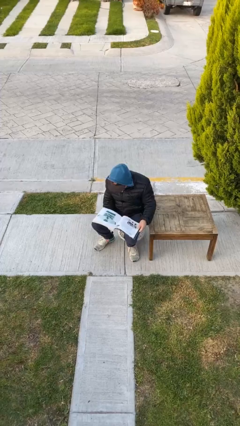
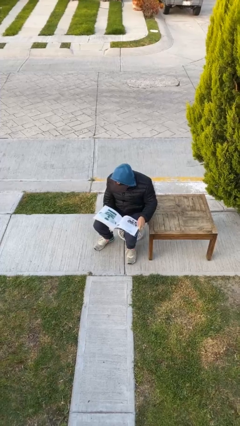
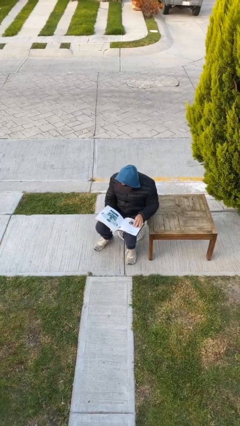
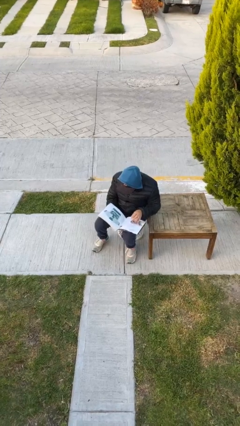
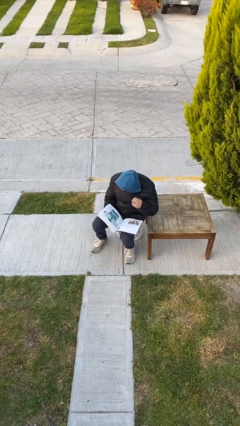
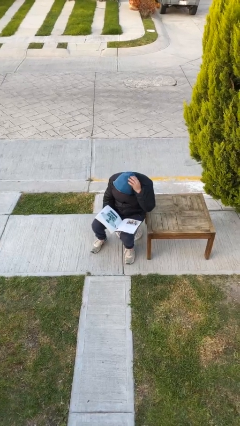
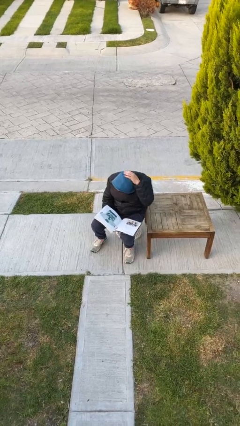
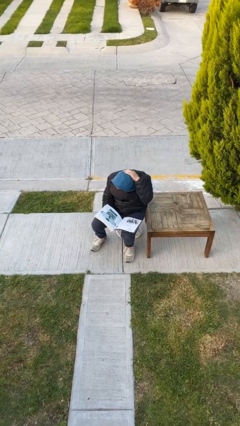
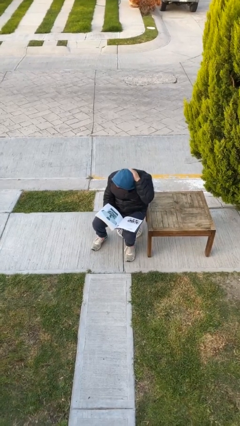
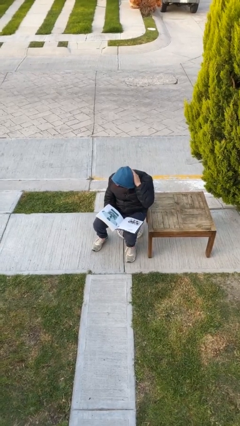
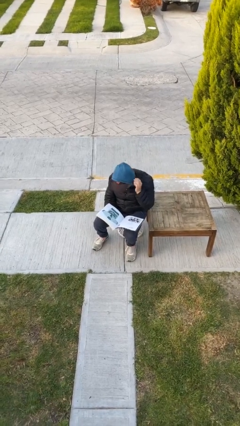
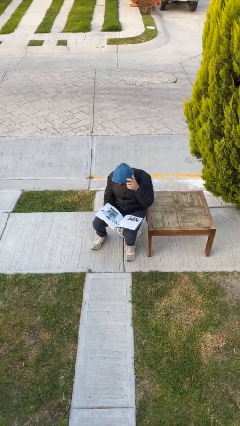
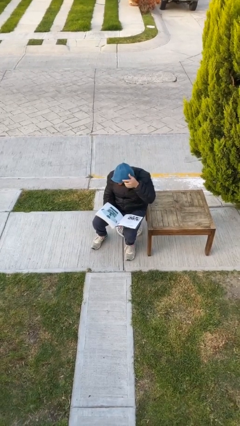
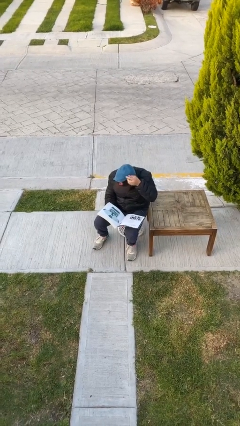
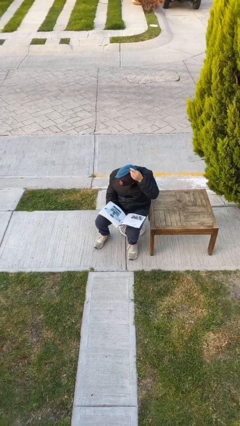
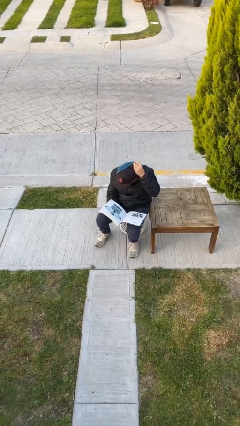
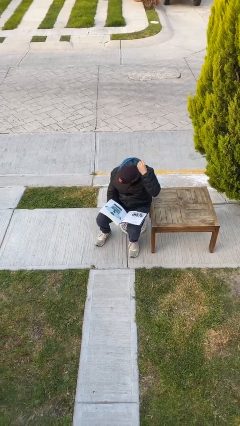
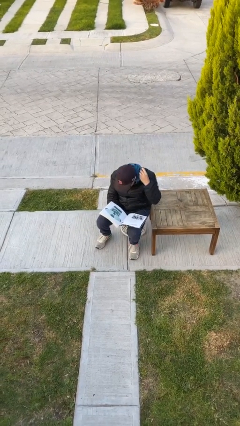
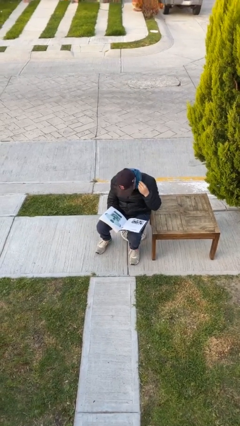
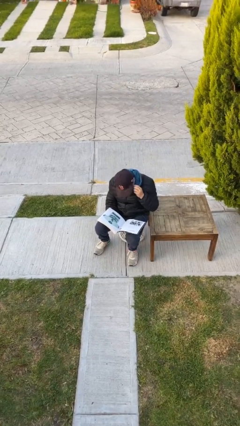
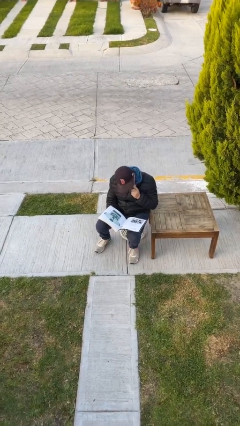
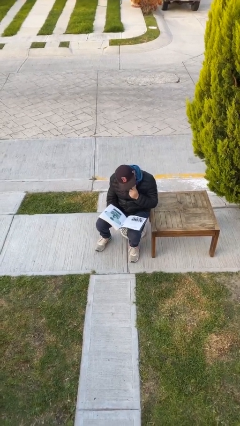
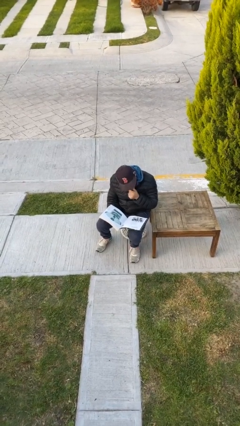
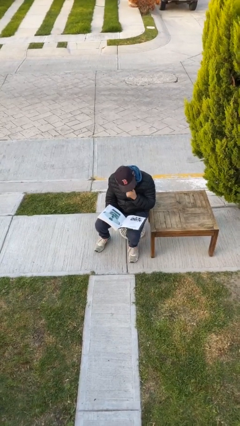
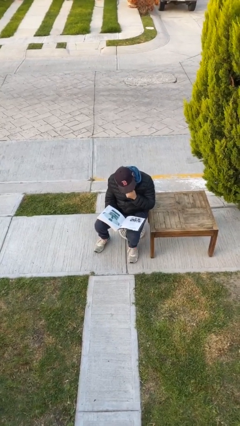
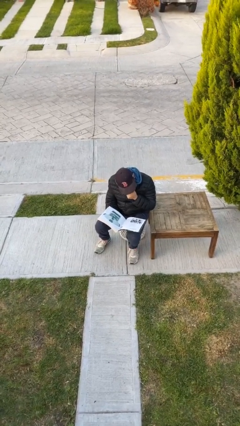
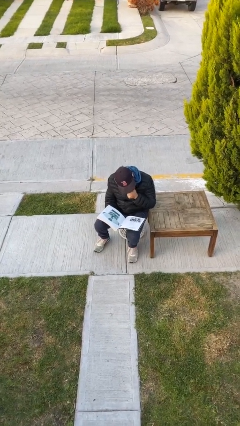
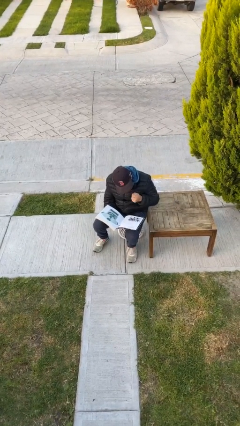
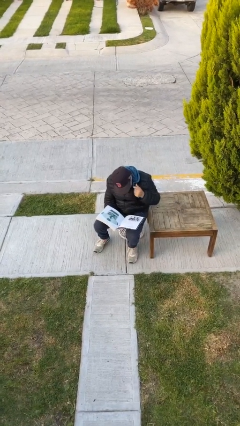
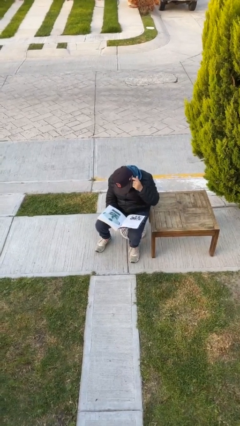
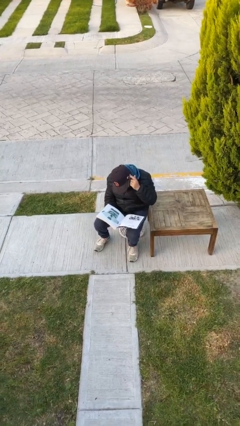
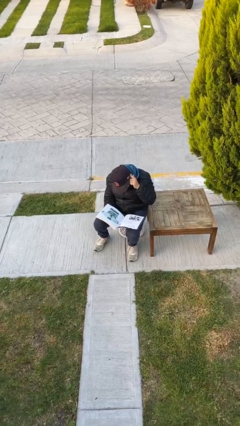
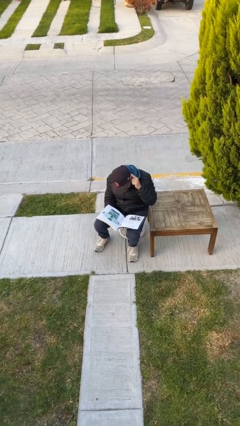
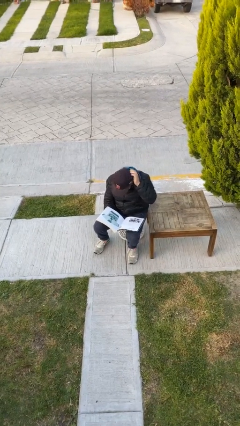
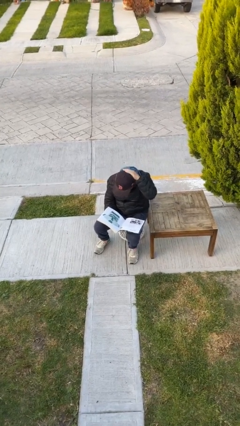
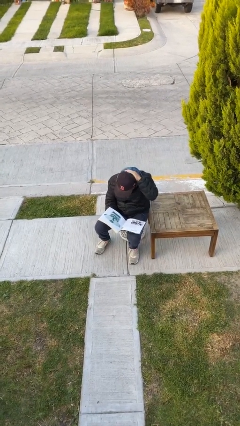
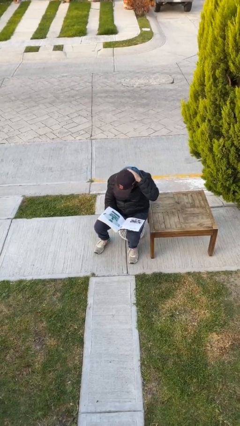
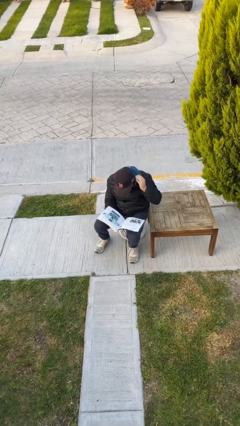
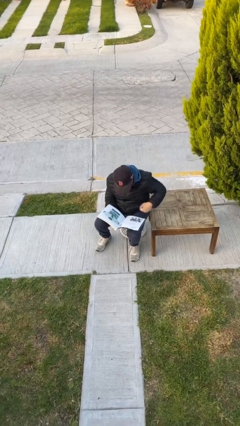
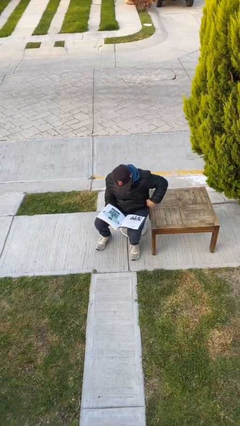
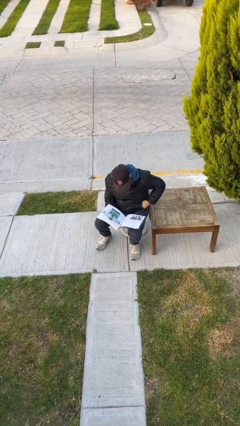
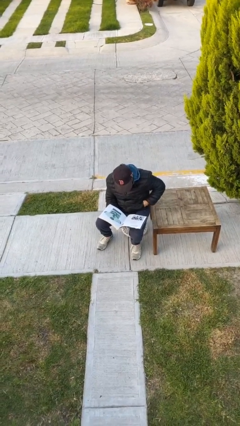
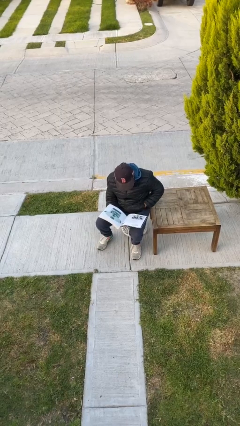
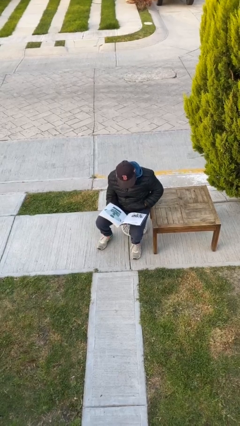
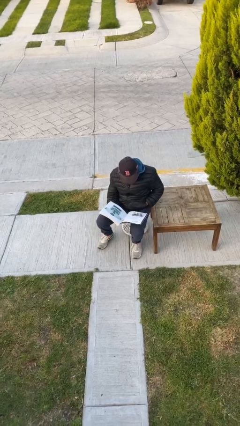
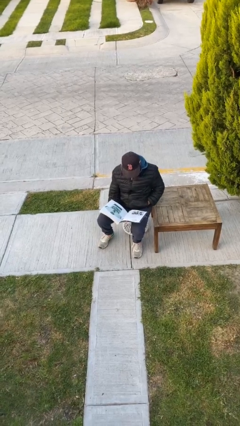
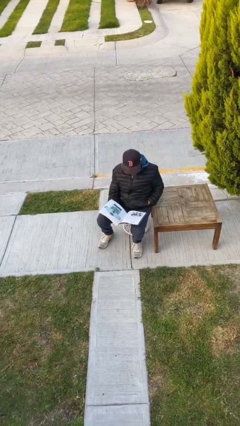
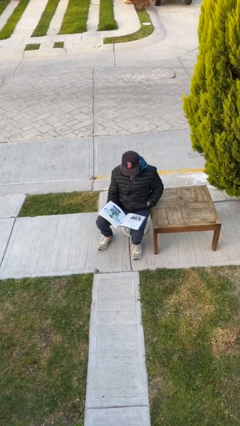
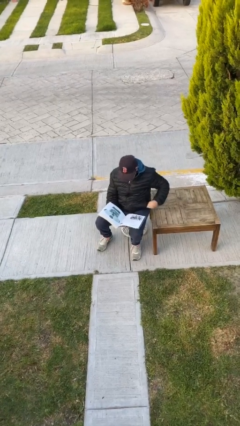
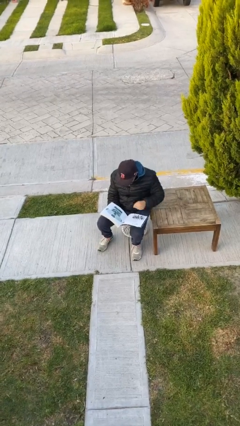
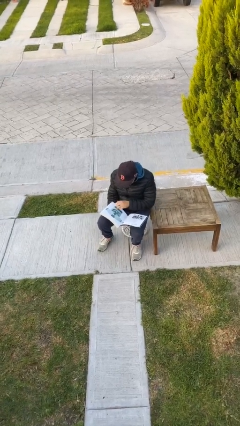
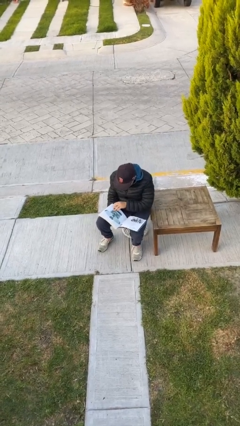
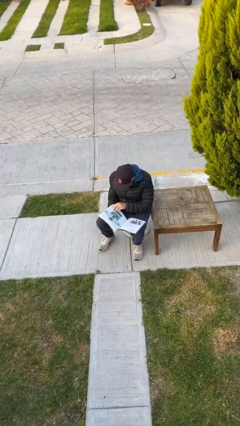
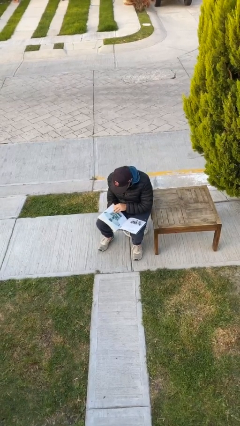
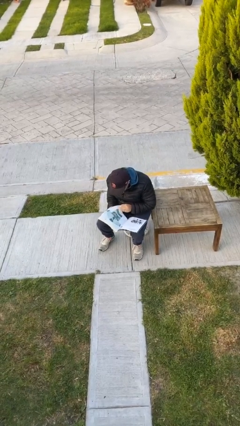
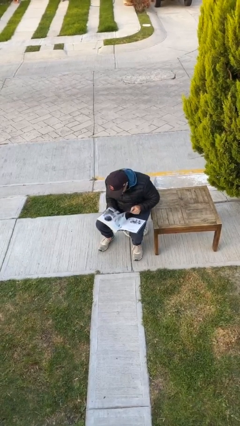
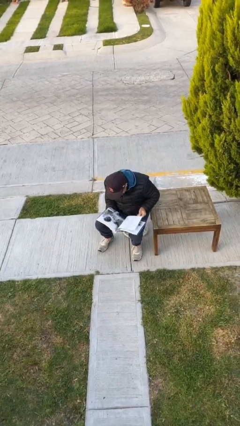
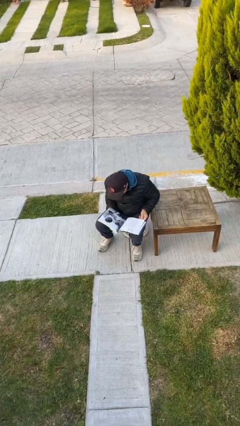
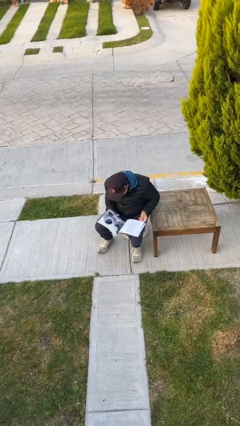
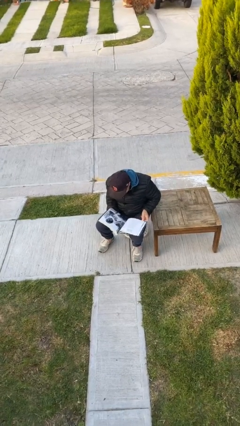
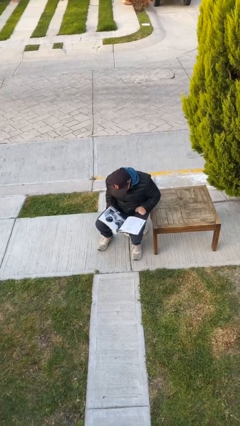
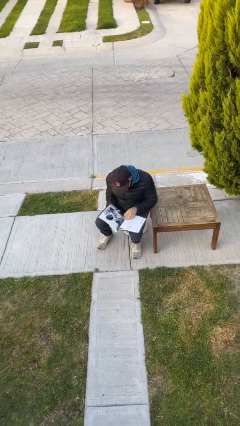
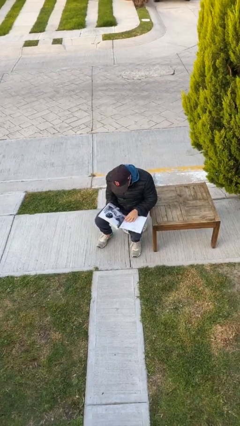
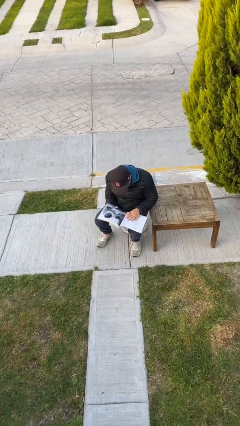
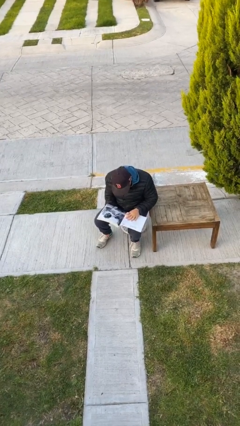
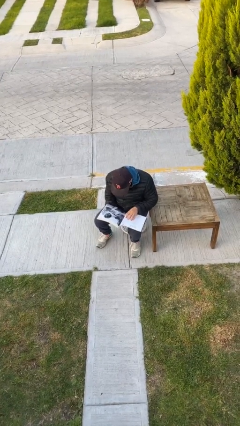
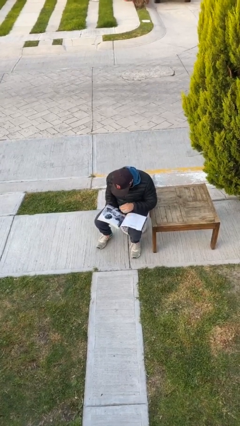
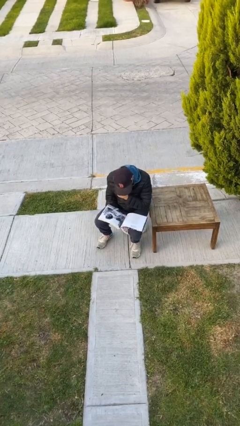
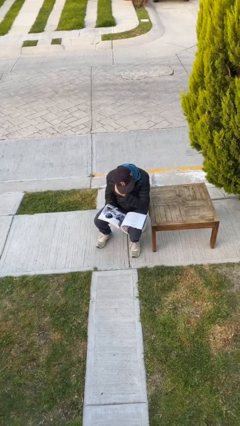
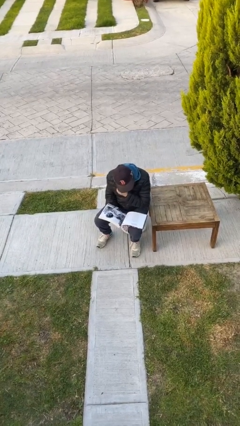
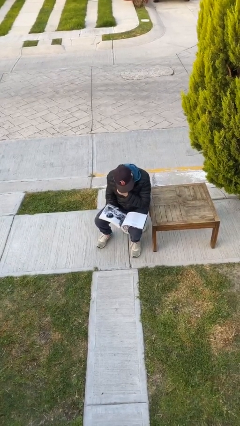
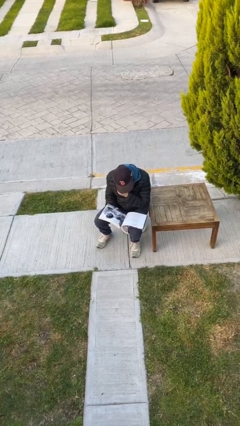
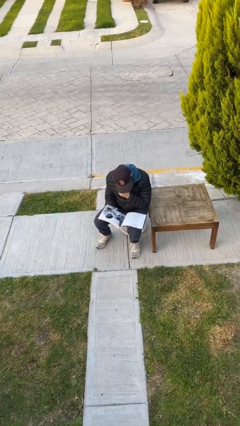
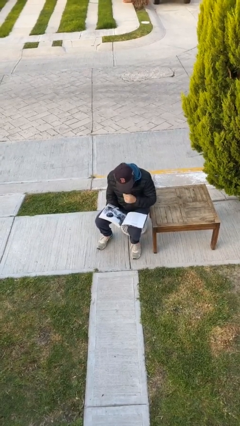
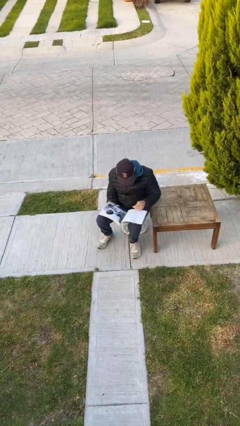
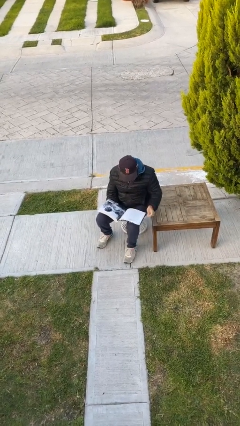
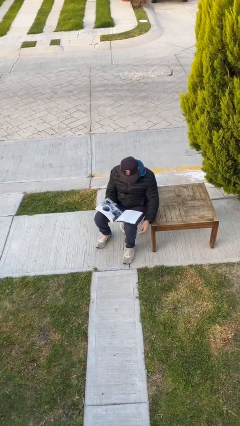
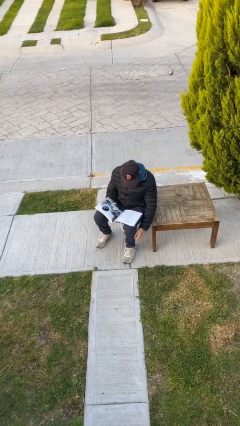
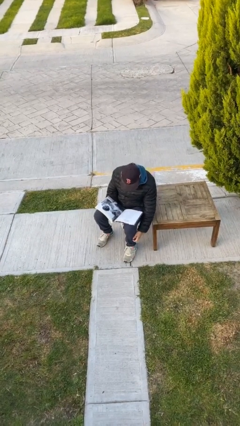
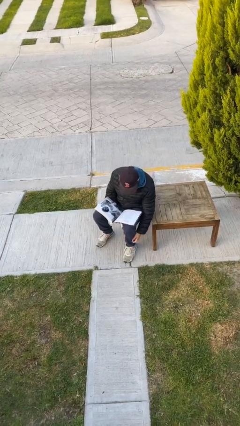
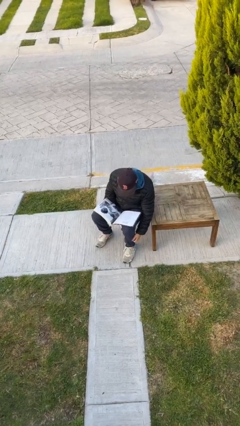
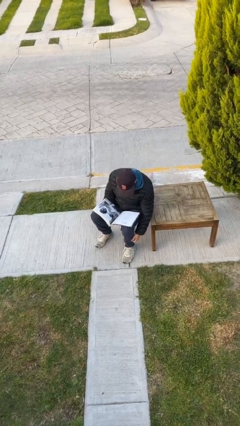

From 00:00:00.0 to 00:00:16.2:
person reads document

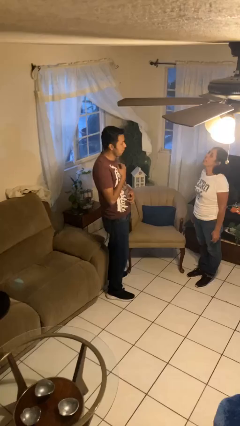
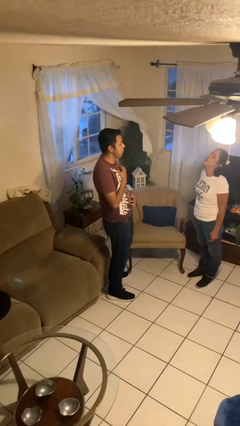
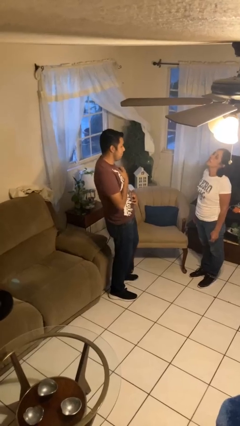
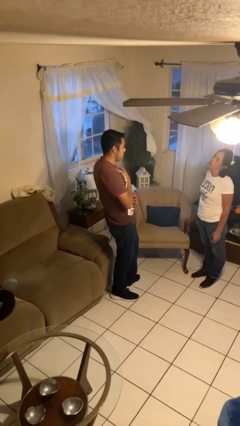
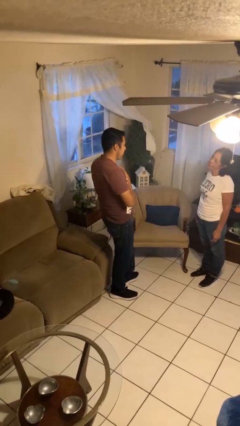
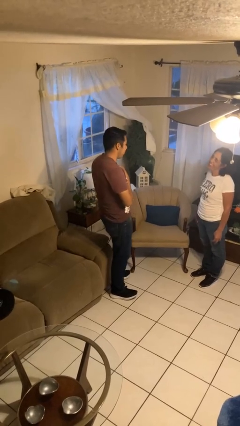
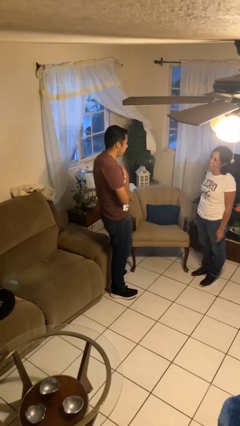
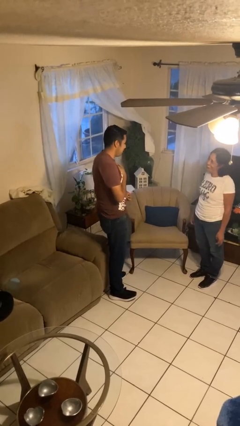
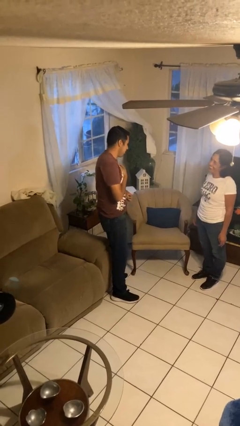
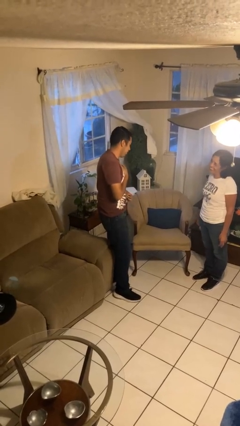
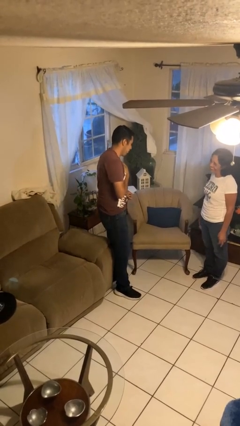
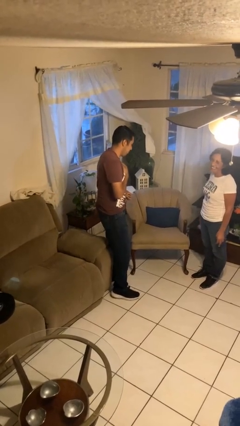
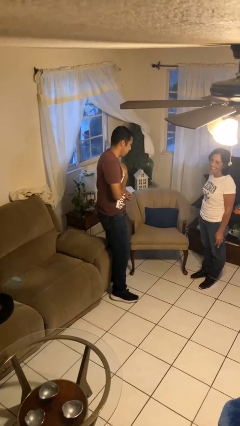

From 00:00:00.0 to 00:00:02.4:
person laughs with person
